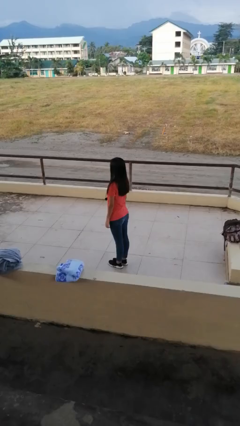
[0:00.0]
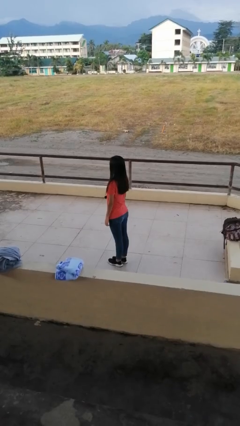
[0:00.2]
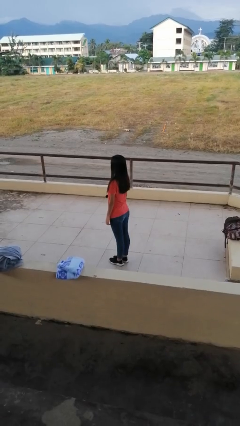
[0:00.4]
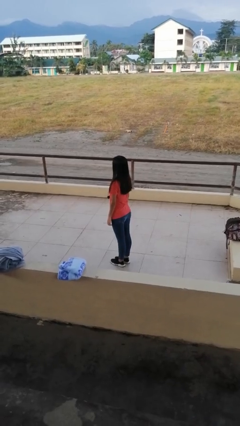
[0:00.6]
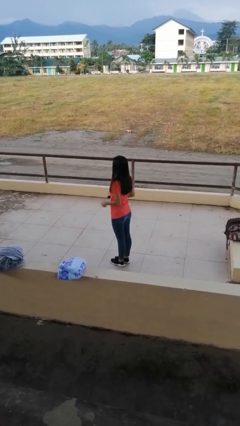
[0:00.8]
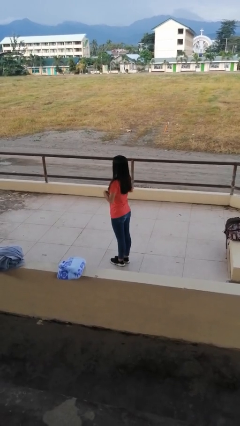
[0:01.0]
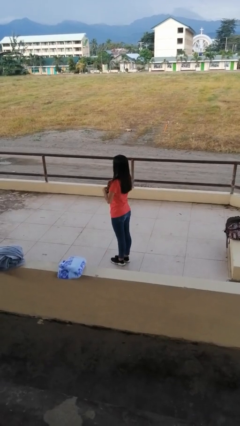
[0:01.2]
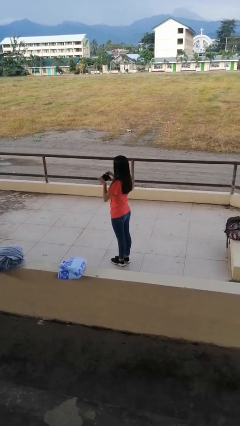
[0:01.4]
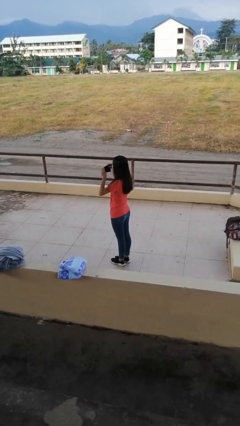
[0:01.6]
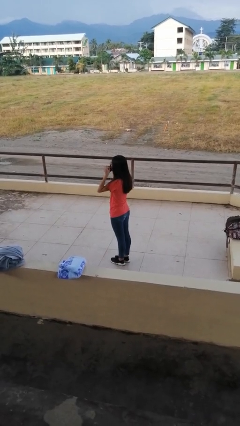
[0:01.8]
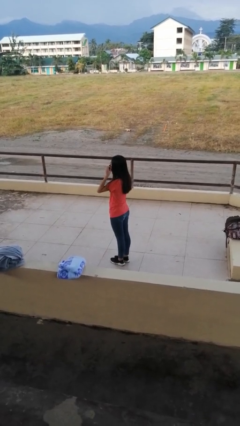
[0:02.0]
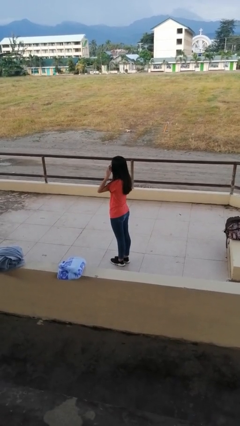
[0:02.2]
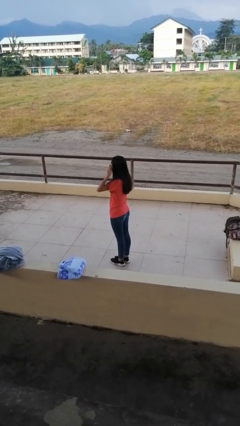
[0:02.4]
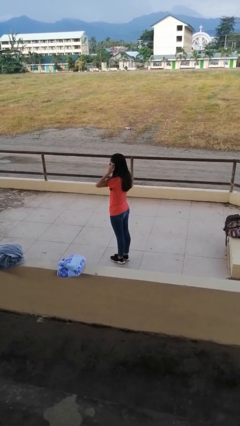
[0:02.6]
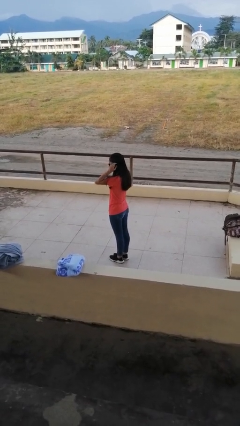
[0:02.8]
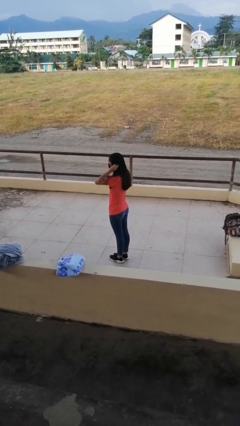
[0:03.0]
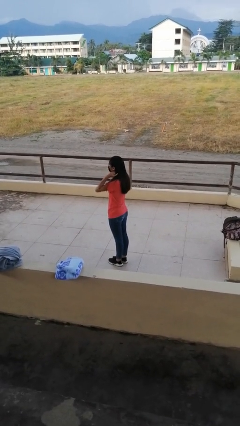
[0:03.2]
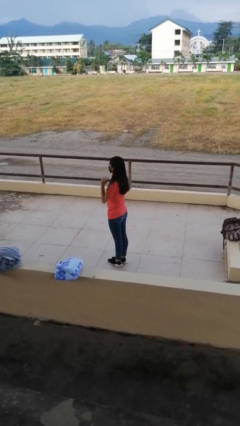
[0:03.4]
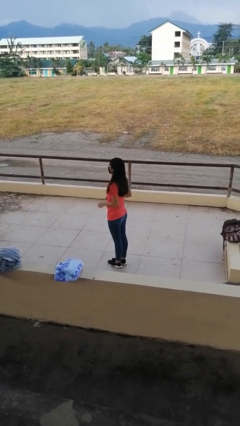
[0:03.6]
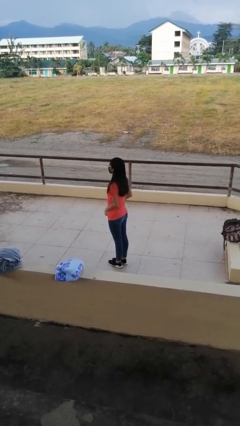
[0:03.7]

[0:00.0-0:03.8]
person puts on facemask

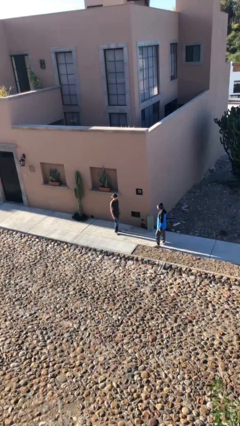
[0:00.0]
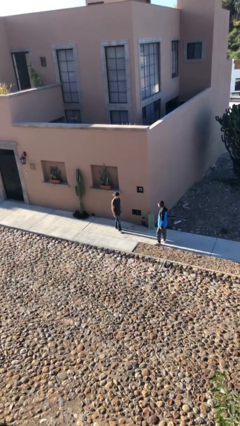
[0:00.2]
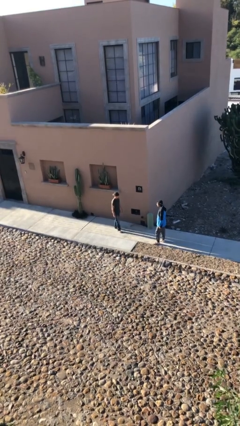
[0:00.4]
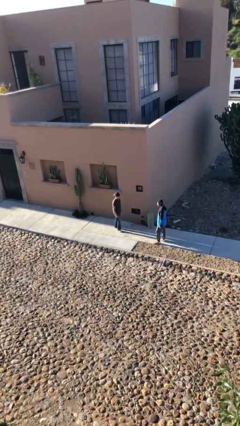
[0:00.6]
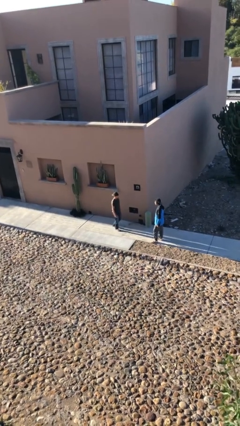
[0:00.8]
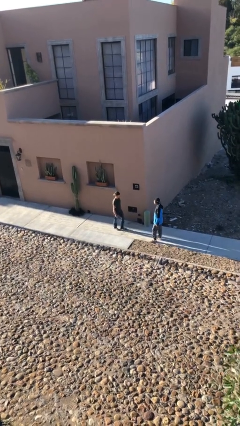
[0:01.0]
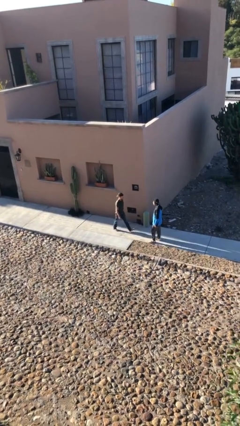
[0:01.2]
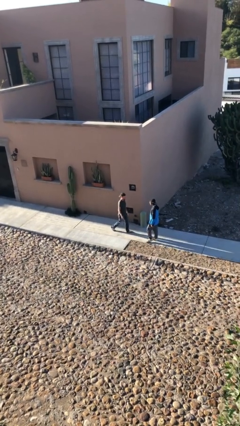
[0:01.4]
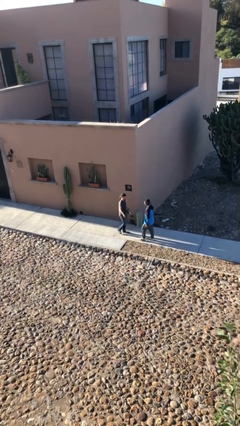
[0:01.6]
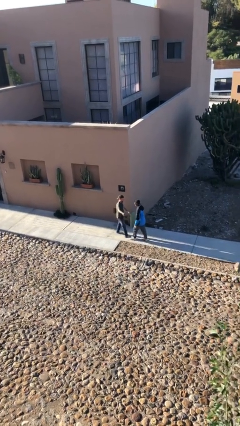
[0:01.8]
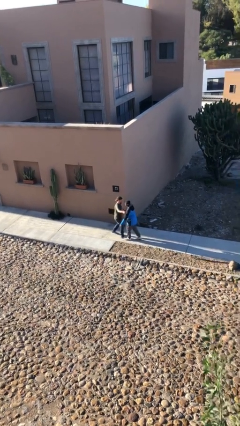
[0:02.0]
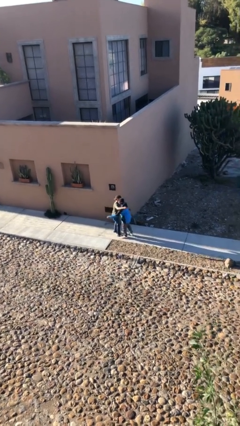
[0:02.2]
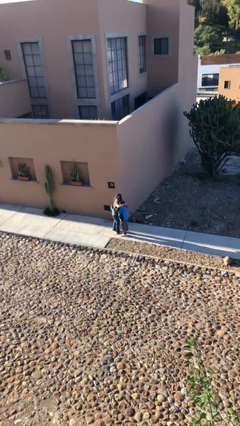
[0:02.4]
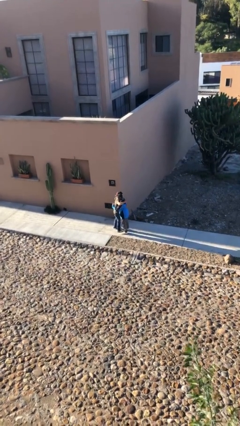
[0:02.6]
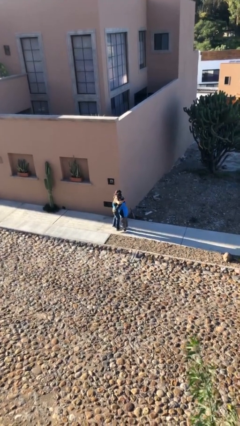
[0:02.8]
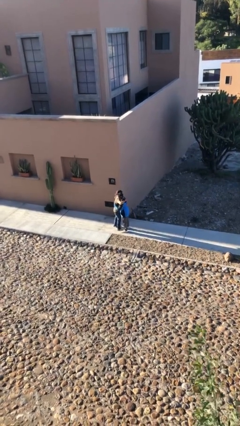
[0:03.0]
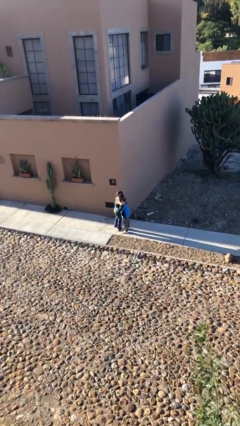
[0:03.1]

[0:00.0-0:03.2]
person embraces person

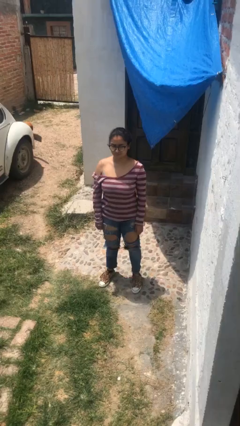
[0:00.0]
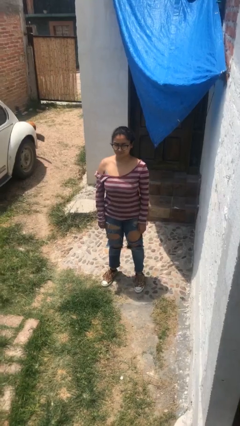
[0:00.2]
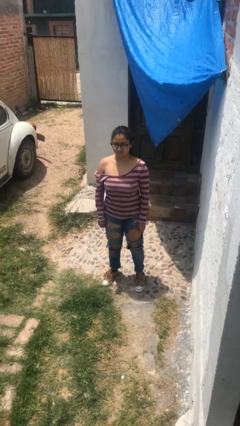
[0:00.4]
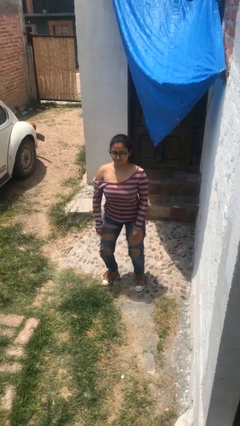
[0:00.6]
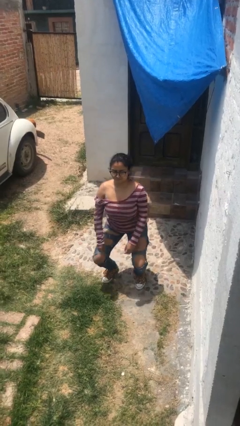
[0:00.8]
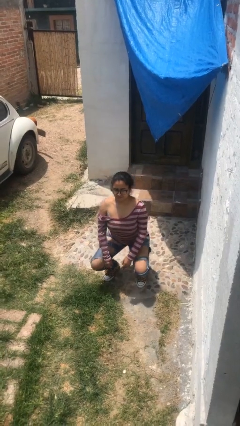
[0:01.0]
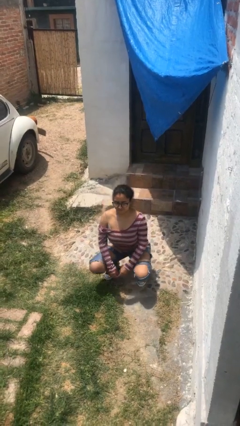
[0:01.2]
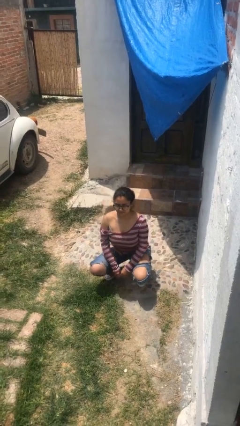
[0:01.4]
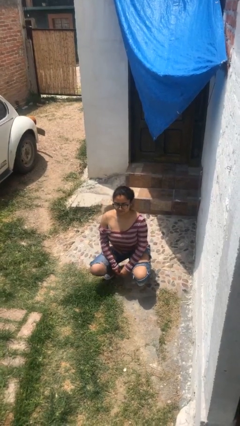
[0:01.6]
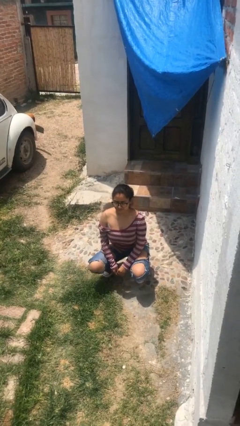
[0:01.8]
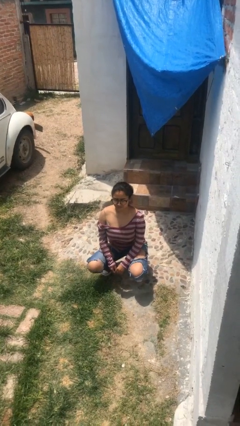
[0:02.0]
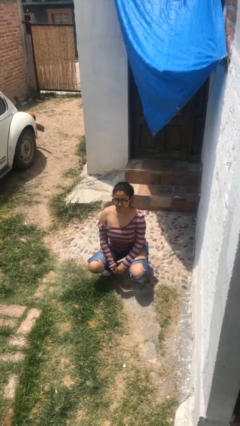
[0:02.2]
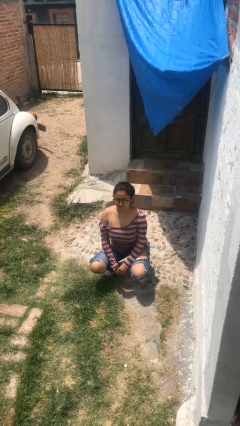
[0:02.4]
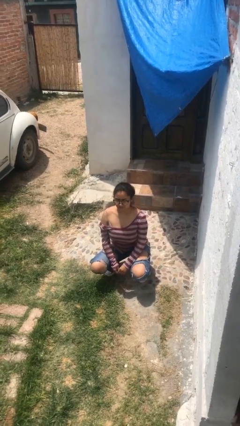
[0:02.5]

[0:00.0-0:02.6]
person squats

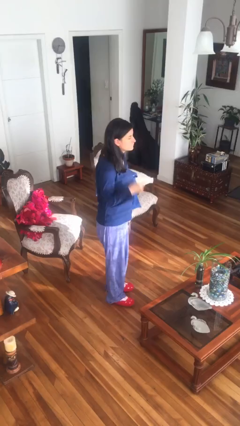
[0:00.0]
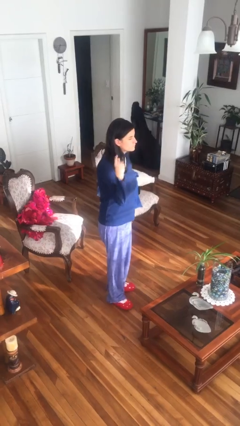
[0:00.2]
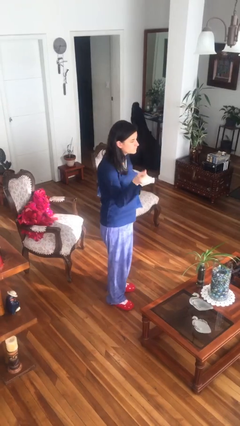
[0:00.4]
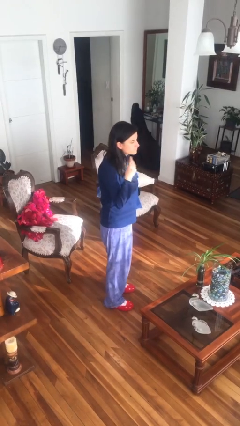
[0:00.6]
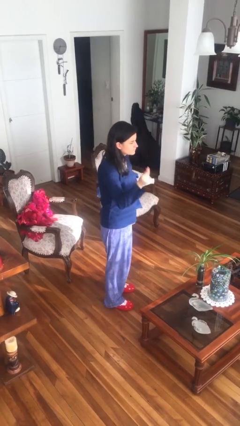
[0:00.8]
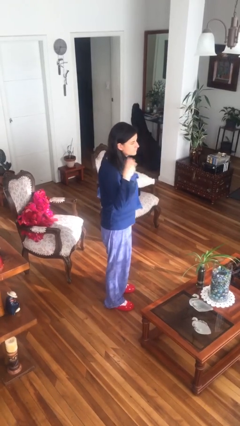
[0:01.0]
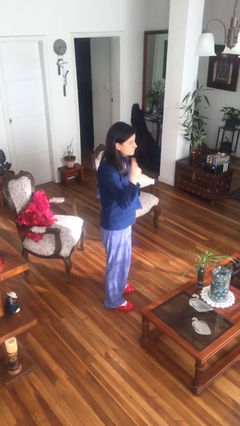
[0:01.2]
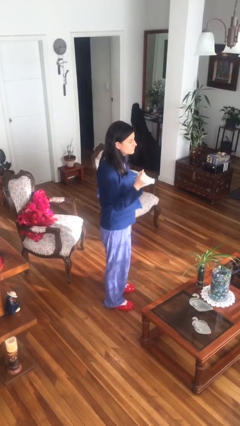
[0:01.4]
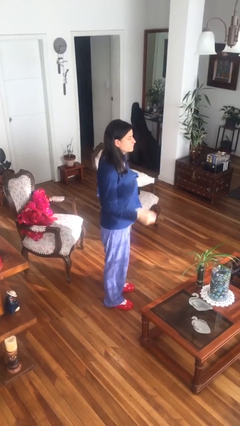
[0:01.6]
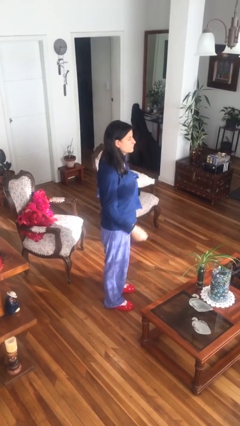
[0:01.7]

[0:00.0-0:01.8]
person snaps fingers

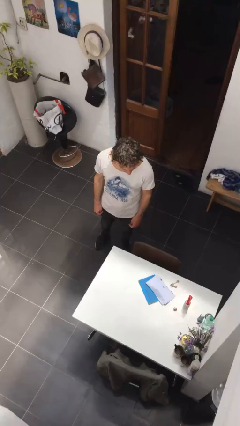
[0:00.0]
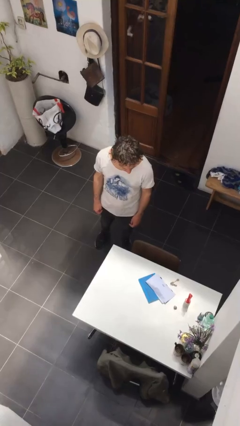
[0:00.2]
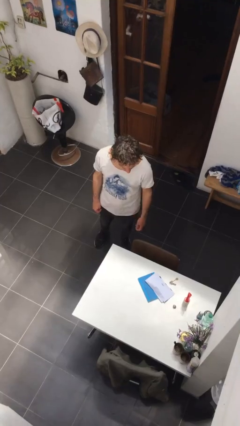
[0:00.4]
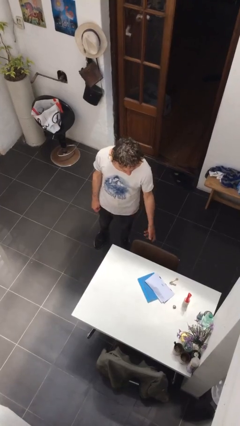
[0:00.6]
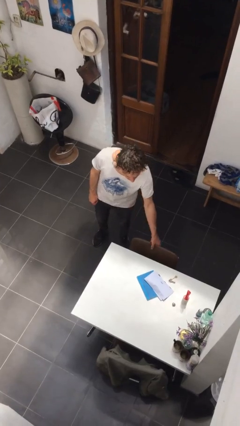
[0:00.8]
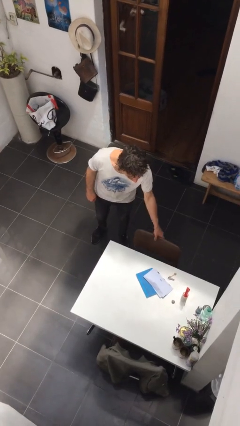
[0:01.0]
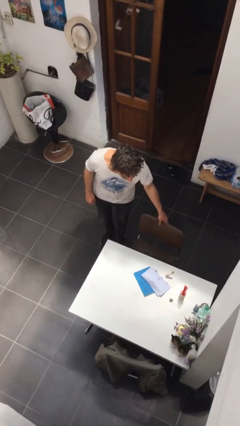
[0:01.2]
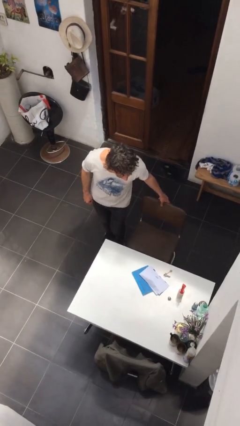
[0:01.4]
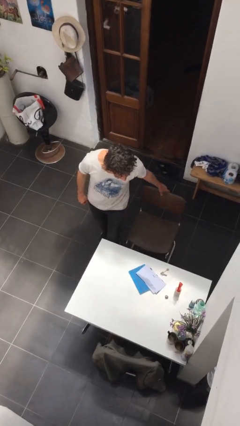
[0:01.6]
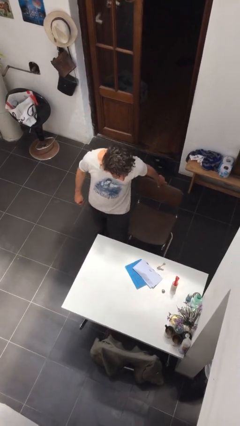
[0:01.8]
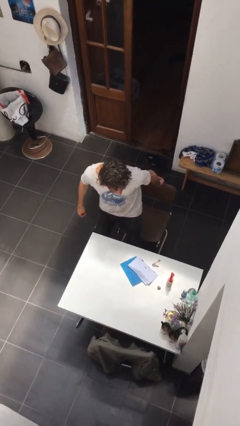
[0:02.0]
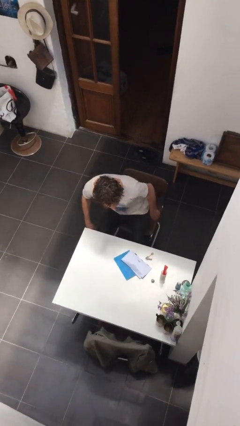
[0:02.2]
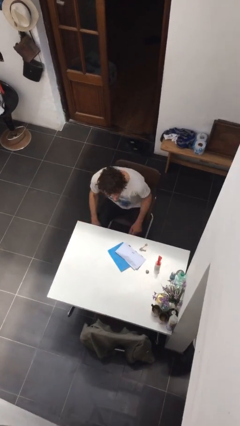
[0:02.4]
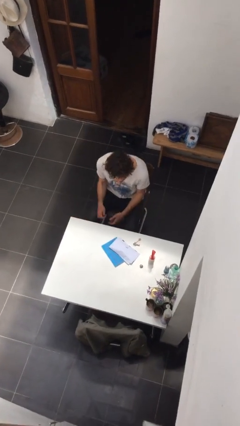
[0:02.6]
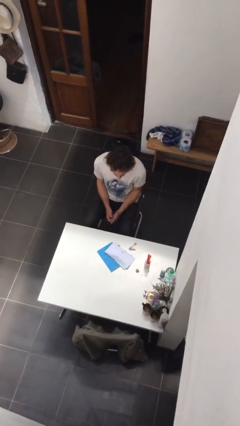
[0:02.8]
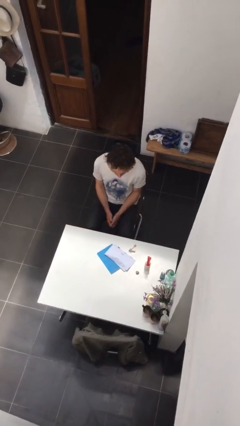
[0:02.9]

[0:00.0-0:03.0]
person sits down

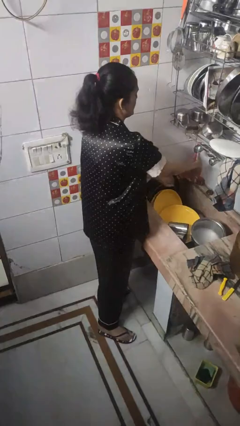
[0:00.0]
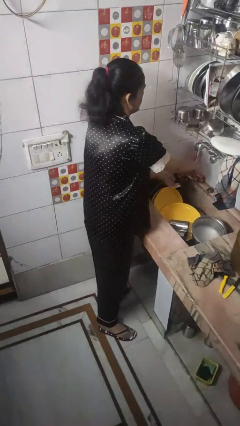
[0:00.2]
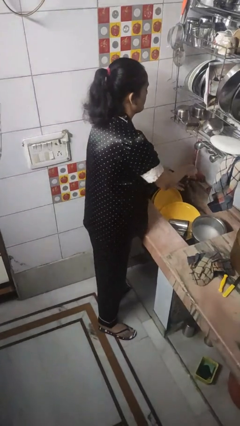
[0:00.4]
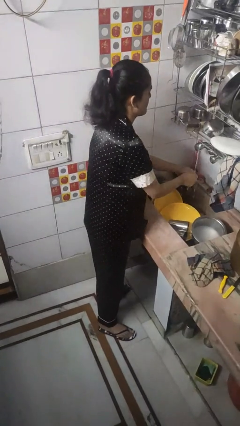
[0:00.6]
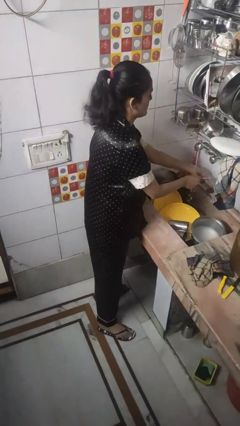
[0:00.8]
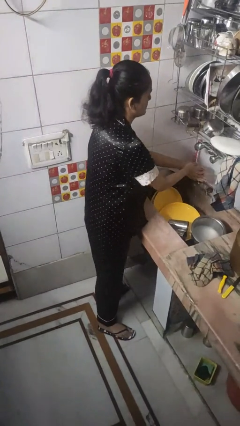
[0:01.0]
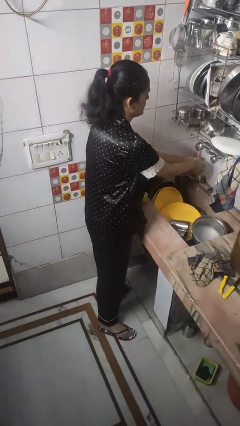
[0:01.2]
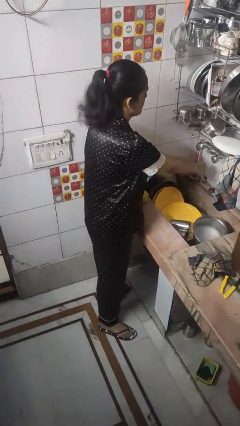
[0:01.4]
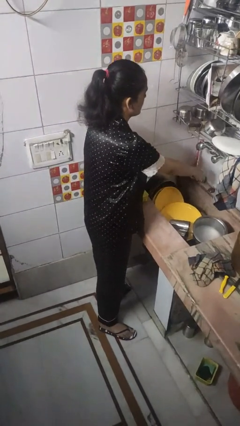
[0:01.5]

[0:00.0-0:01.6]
person washes hands

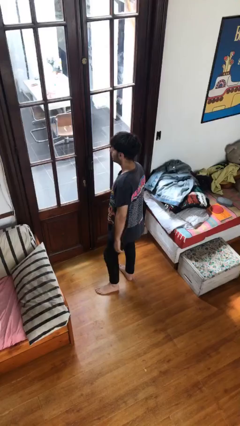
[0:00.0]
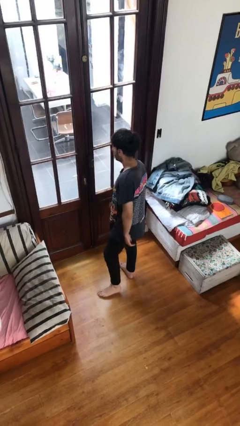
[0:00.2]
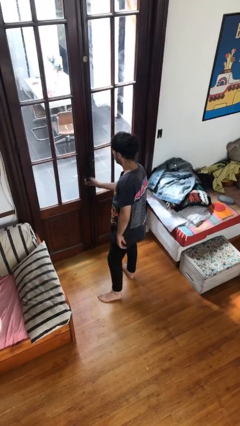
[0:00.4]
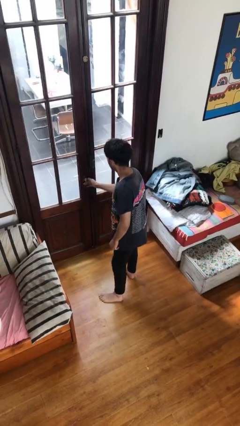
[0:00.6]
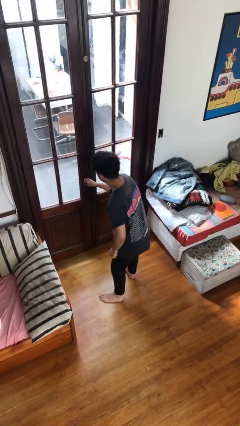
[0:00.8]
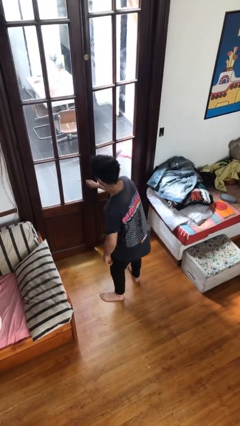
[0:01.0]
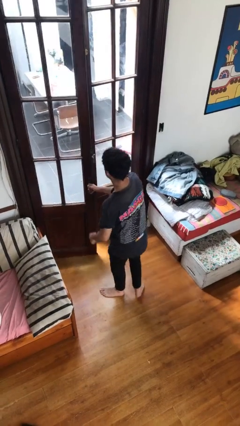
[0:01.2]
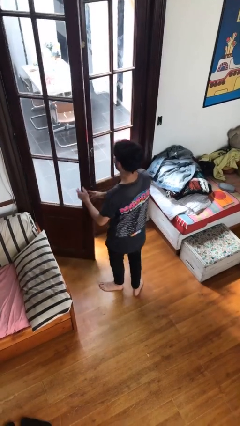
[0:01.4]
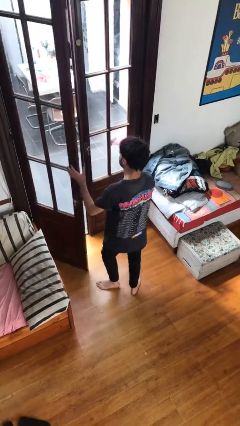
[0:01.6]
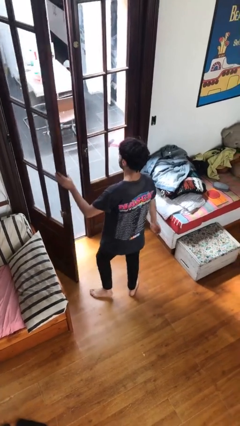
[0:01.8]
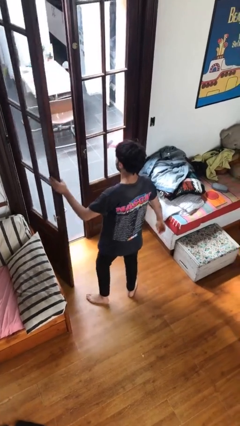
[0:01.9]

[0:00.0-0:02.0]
person opens facility door
